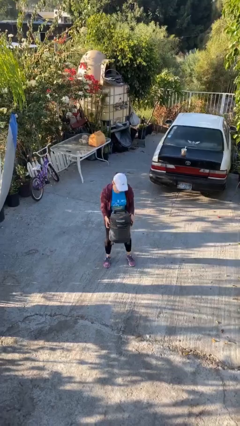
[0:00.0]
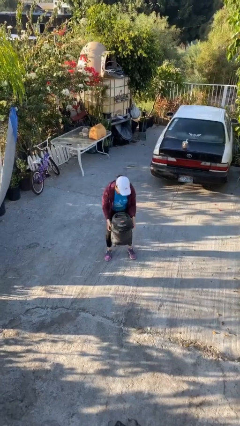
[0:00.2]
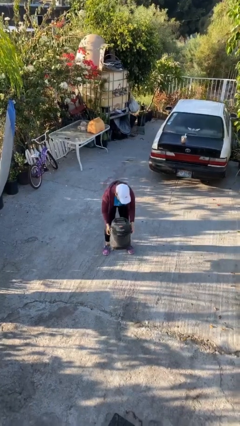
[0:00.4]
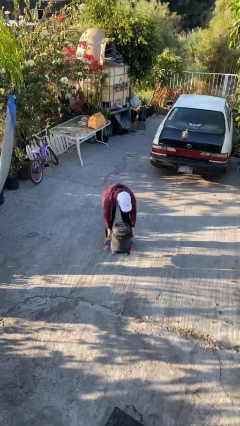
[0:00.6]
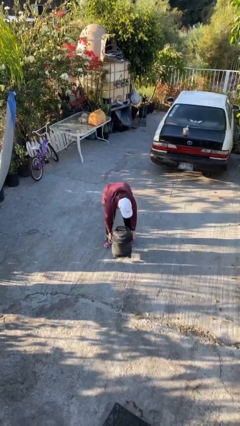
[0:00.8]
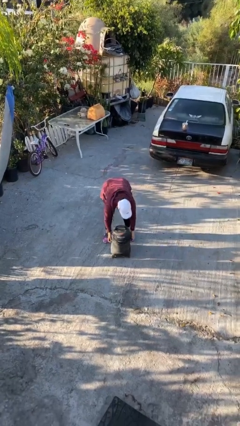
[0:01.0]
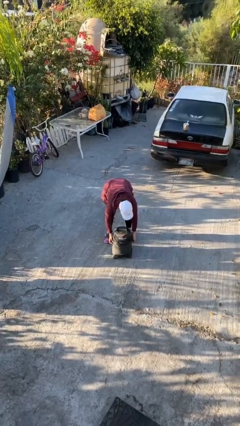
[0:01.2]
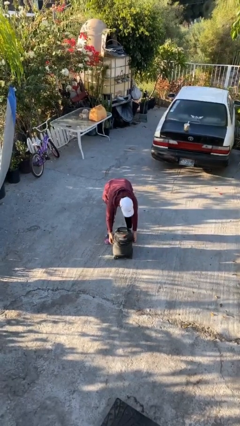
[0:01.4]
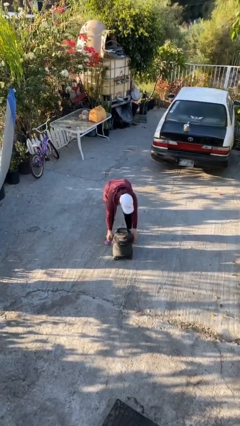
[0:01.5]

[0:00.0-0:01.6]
person puts down object on floor

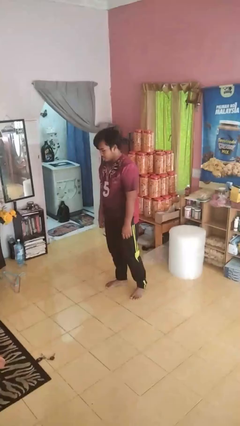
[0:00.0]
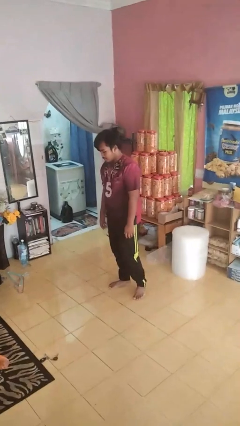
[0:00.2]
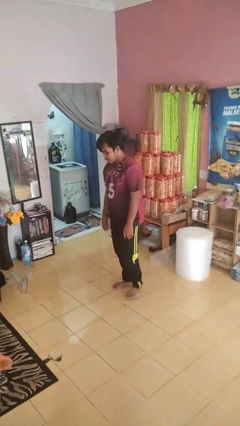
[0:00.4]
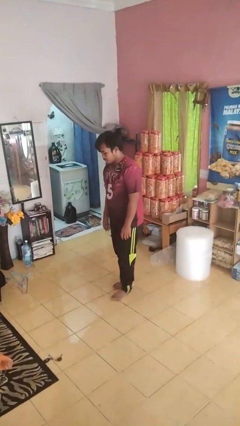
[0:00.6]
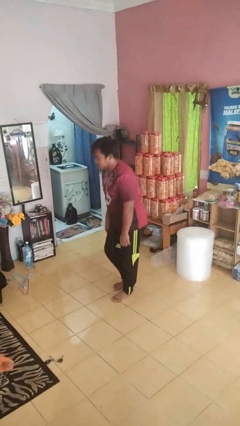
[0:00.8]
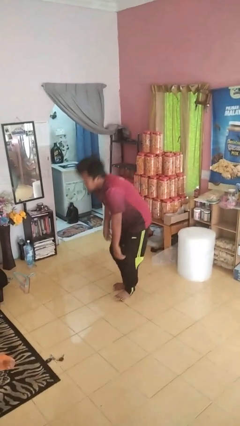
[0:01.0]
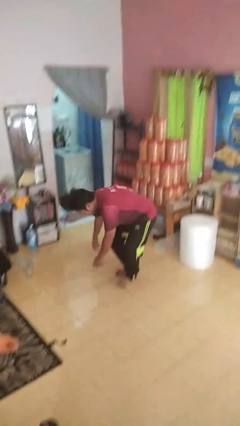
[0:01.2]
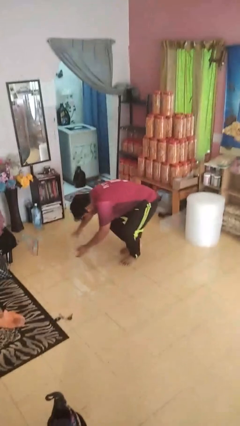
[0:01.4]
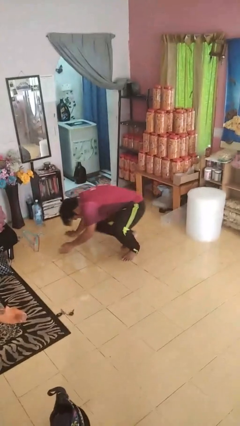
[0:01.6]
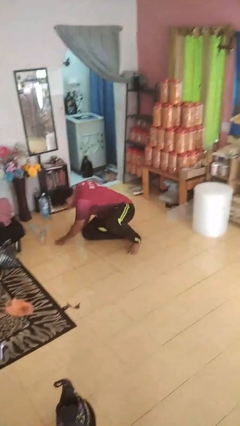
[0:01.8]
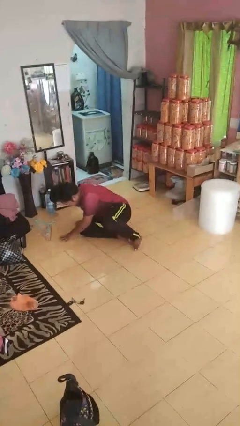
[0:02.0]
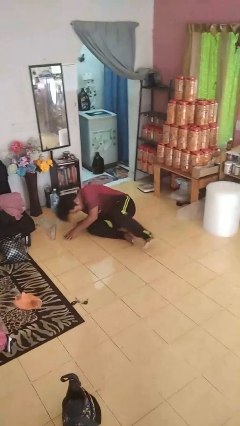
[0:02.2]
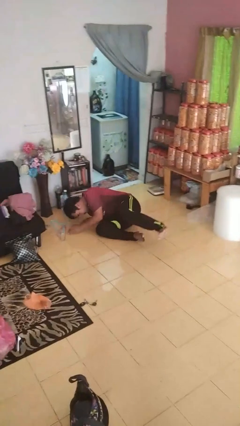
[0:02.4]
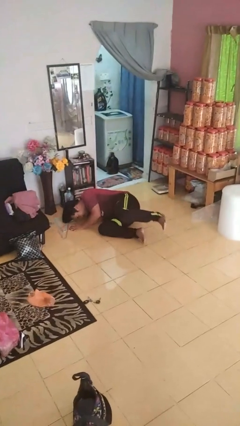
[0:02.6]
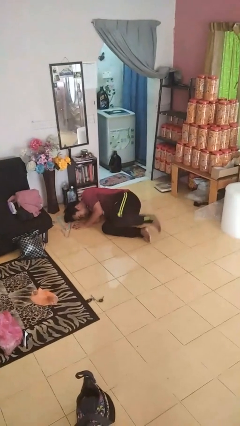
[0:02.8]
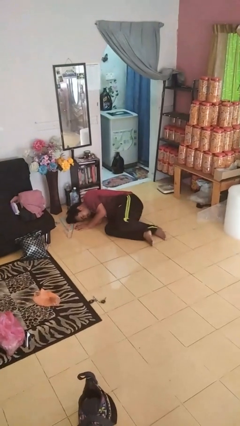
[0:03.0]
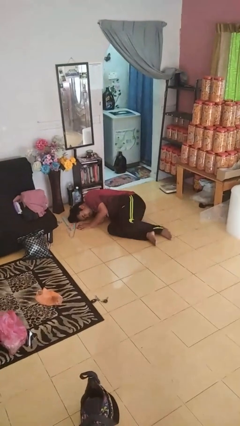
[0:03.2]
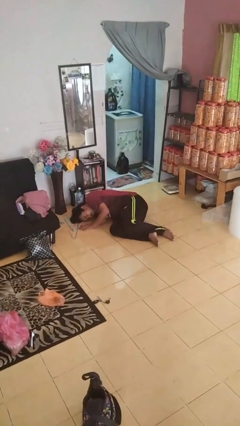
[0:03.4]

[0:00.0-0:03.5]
person falls while standing

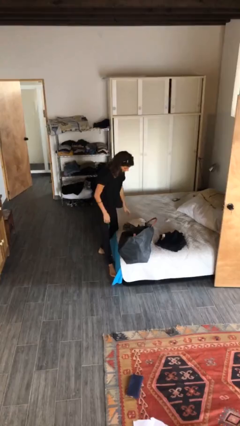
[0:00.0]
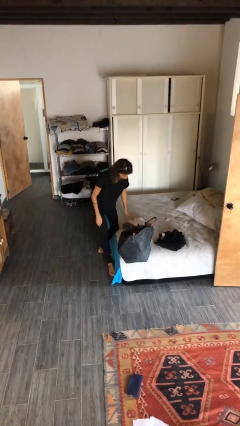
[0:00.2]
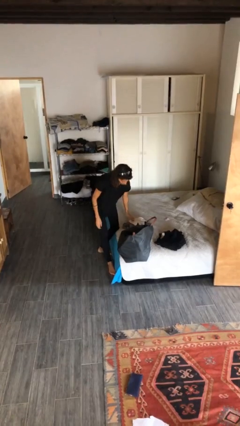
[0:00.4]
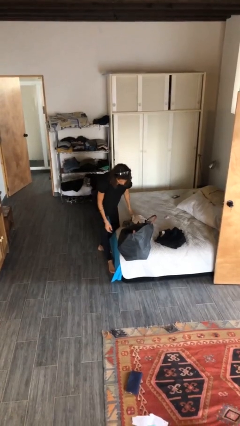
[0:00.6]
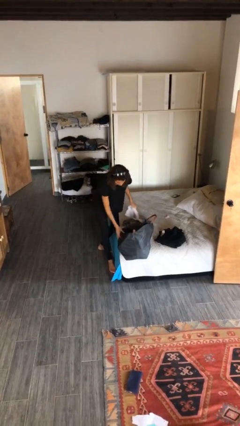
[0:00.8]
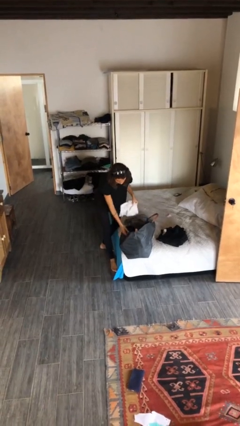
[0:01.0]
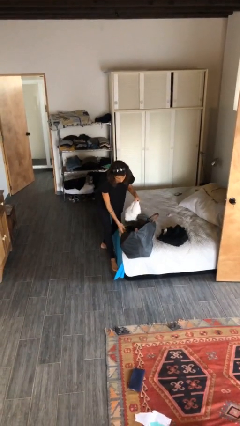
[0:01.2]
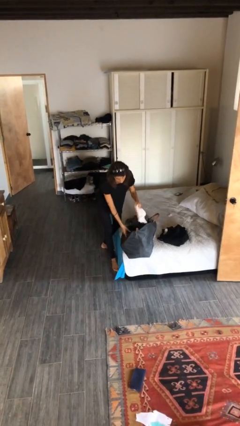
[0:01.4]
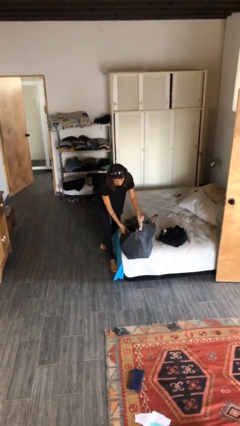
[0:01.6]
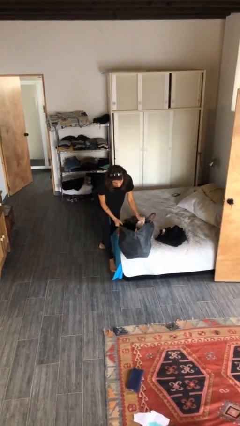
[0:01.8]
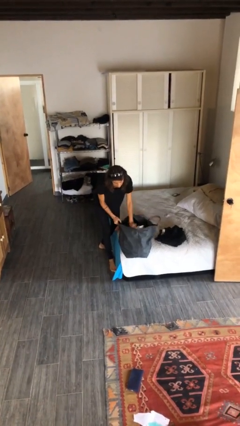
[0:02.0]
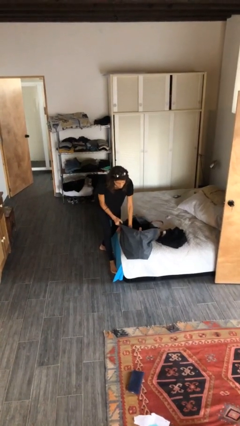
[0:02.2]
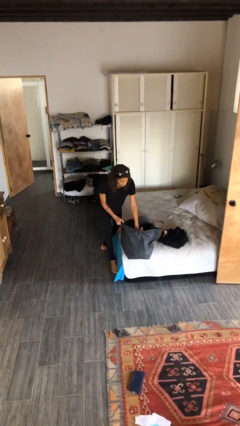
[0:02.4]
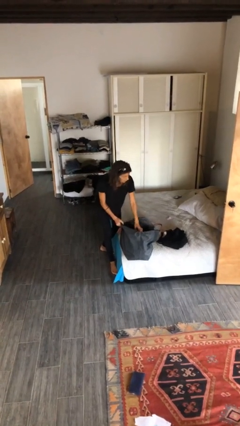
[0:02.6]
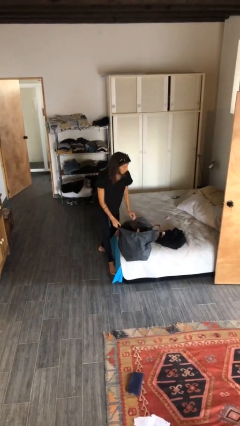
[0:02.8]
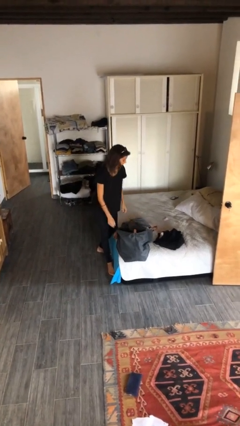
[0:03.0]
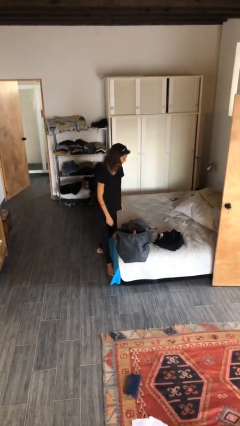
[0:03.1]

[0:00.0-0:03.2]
person loads clothes into suitcase

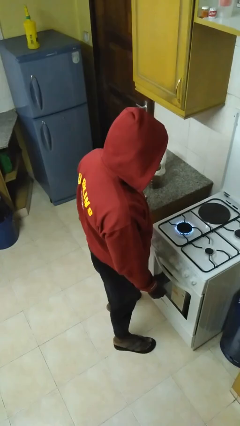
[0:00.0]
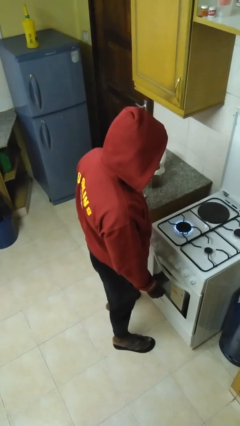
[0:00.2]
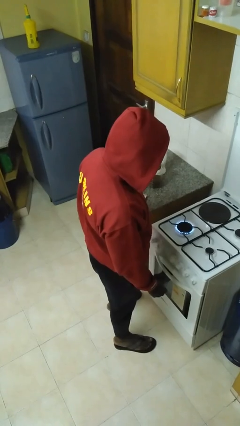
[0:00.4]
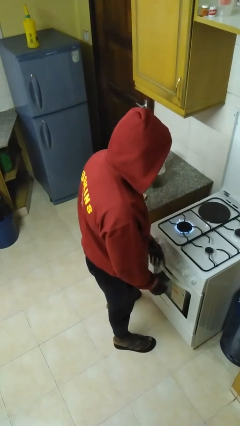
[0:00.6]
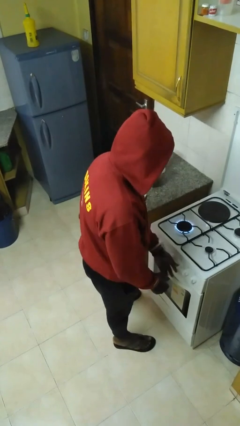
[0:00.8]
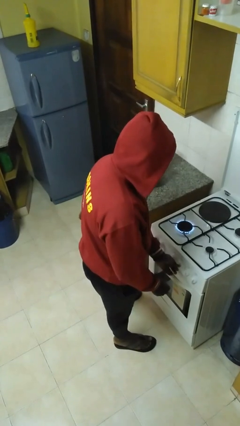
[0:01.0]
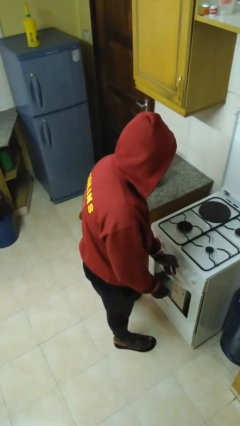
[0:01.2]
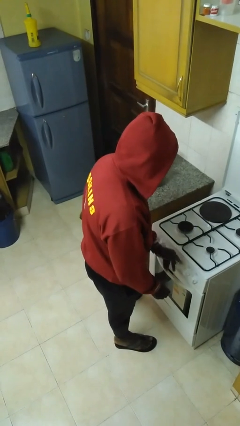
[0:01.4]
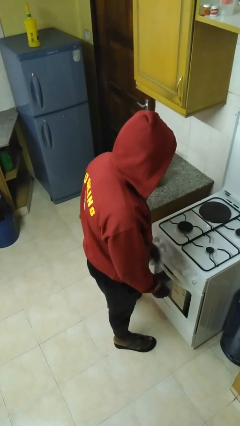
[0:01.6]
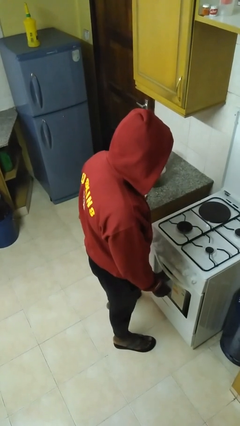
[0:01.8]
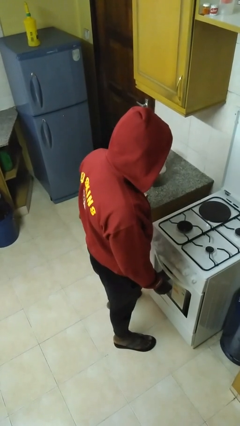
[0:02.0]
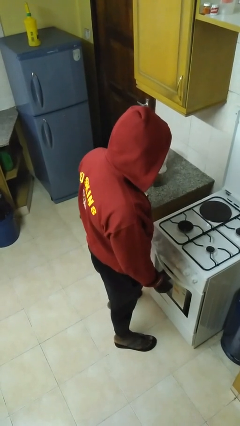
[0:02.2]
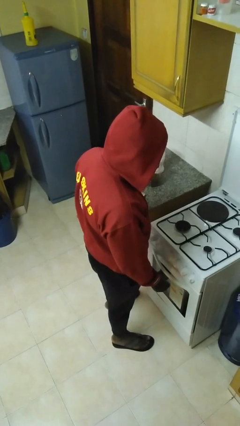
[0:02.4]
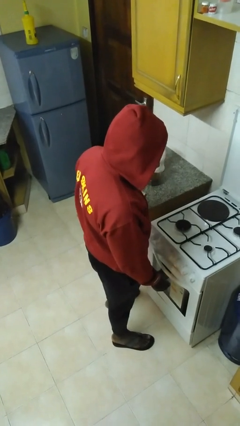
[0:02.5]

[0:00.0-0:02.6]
person turns off stovetop

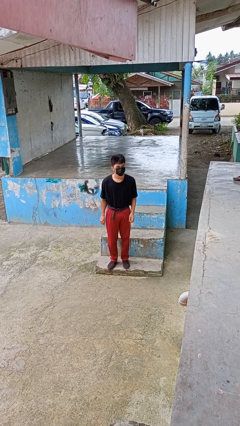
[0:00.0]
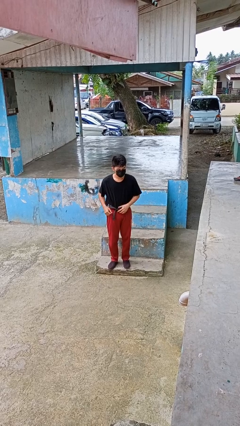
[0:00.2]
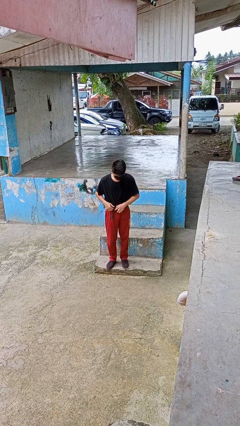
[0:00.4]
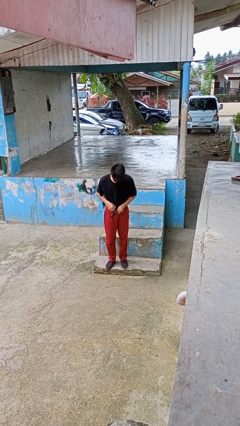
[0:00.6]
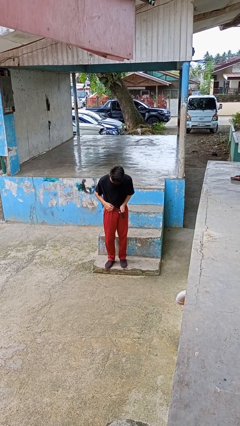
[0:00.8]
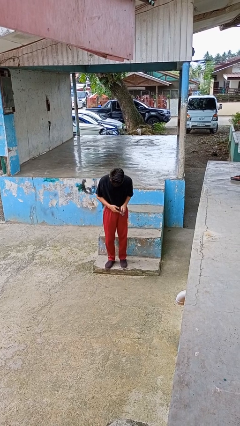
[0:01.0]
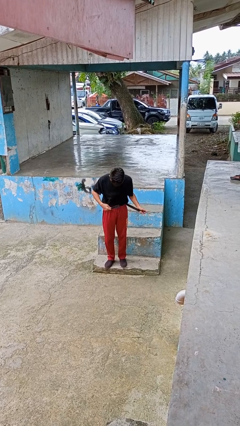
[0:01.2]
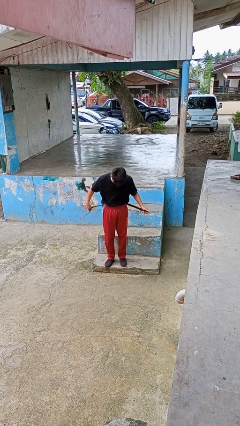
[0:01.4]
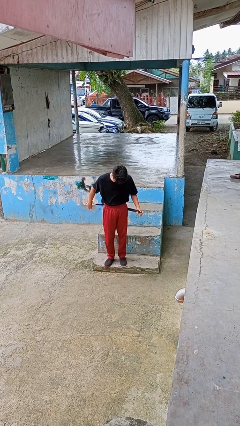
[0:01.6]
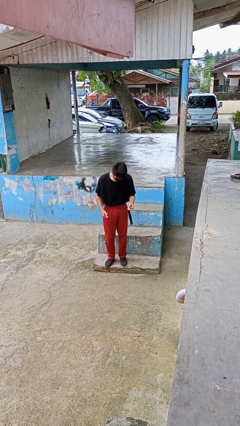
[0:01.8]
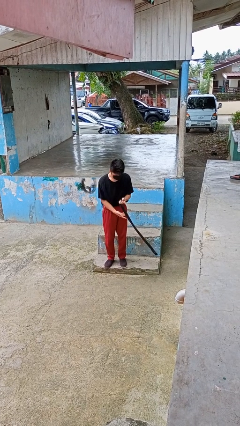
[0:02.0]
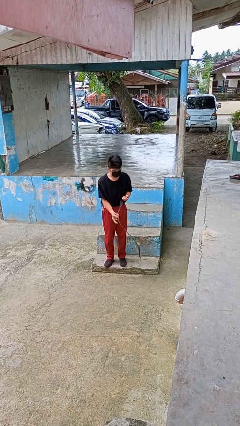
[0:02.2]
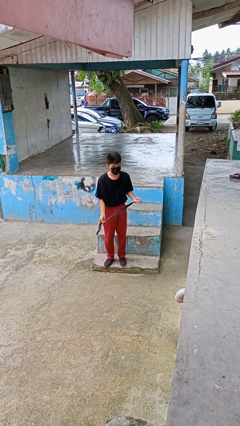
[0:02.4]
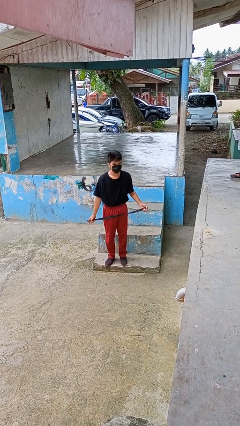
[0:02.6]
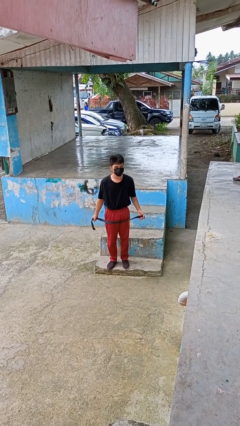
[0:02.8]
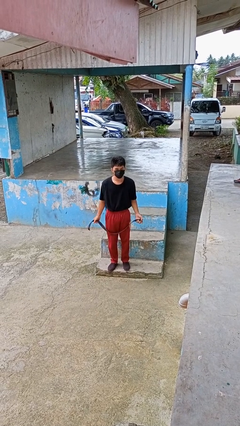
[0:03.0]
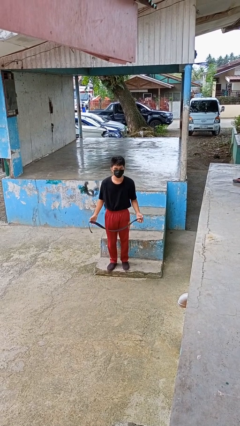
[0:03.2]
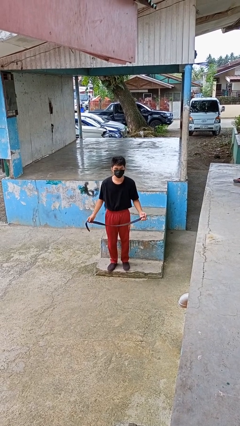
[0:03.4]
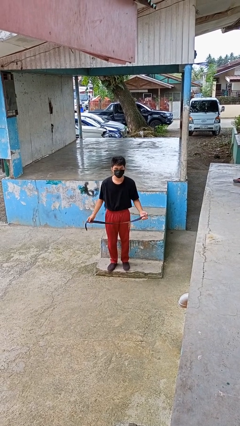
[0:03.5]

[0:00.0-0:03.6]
person takes off belt

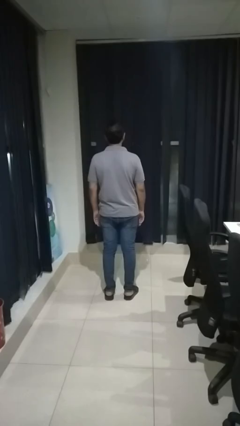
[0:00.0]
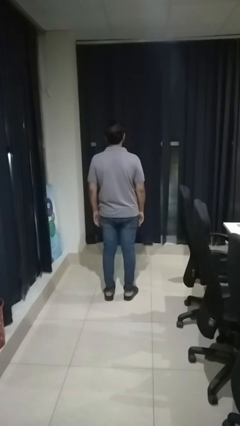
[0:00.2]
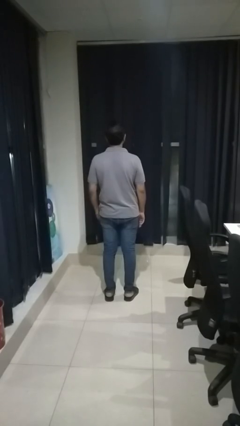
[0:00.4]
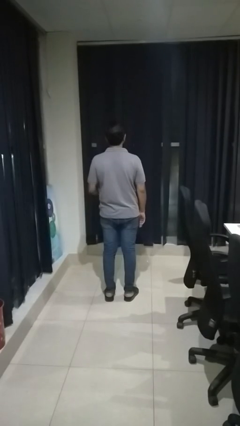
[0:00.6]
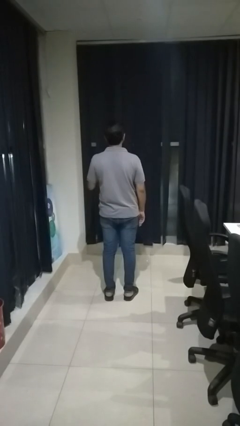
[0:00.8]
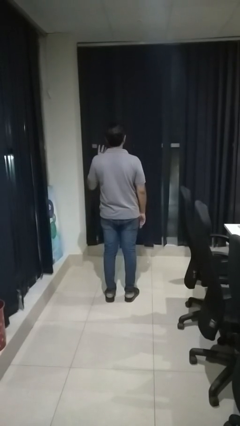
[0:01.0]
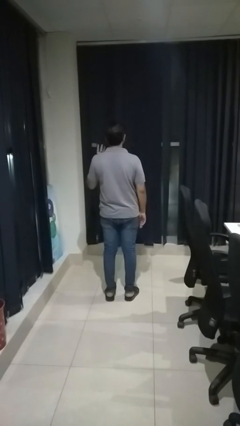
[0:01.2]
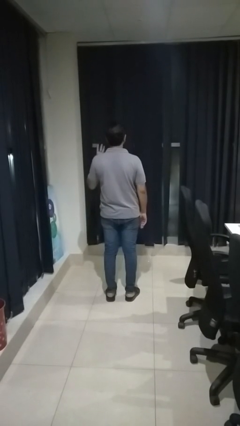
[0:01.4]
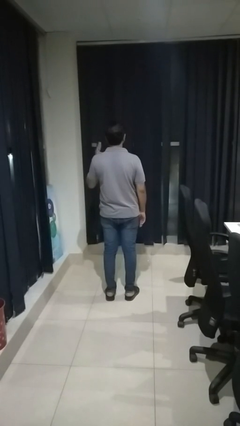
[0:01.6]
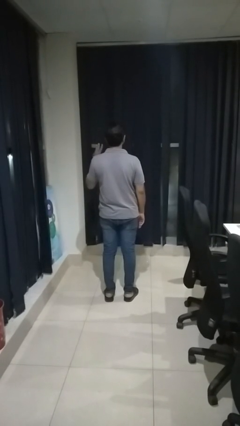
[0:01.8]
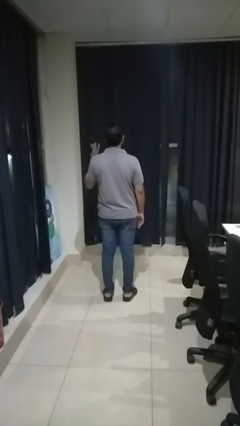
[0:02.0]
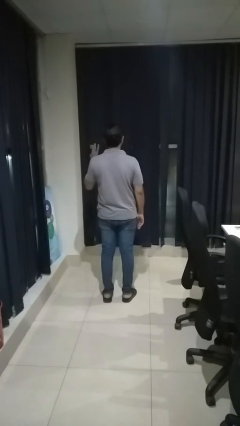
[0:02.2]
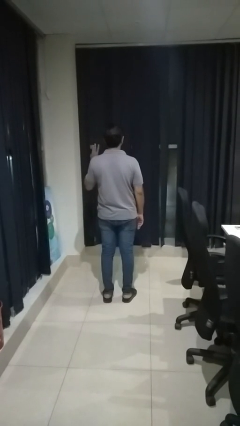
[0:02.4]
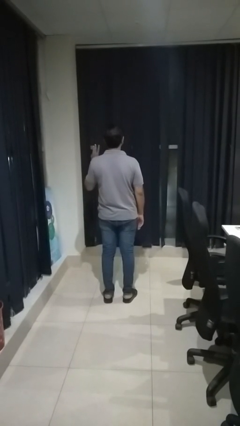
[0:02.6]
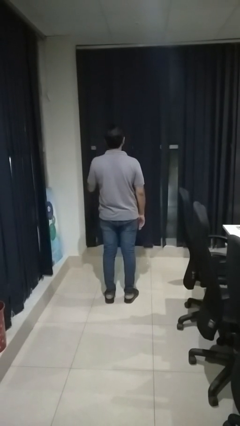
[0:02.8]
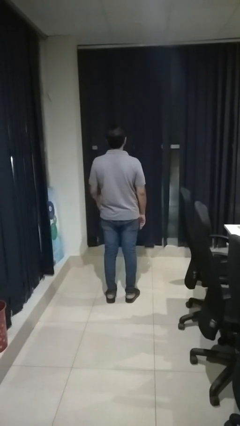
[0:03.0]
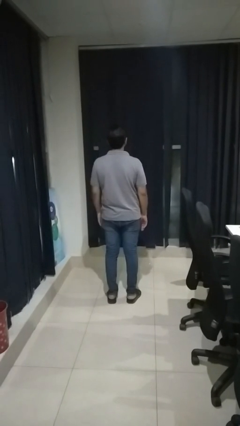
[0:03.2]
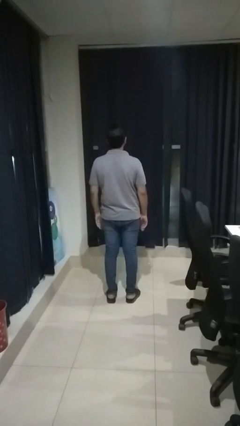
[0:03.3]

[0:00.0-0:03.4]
person gestures number three
